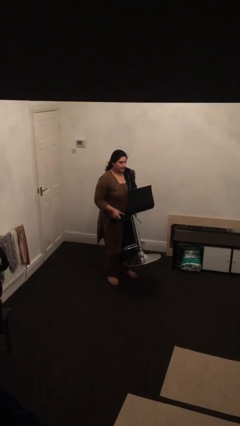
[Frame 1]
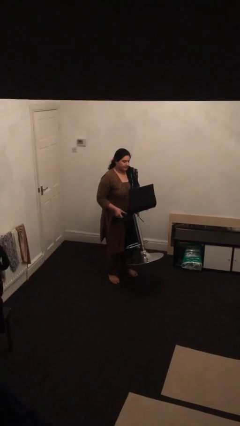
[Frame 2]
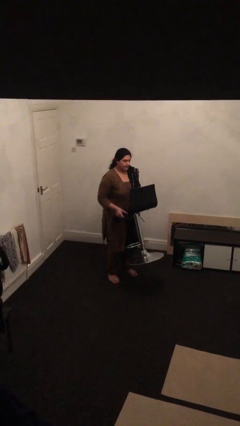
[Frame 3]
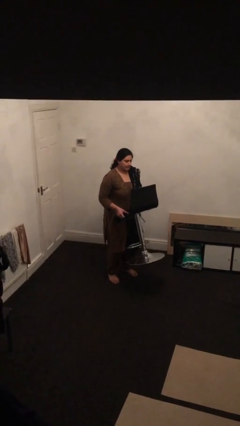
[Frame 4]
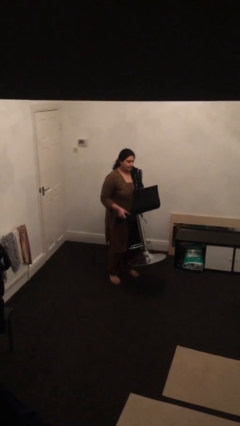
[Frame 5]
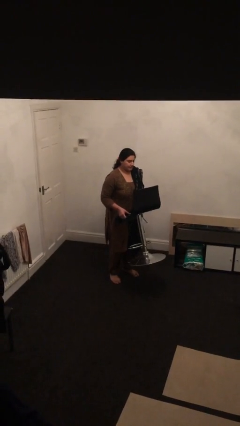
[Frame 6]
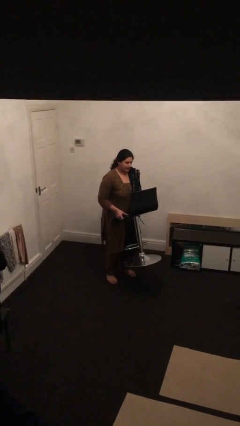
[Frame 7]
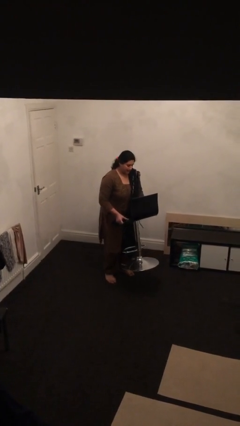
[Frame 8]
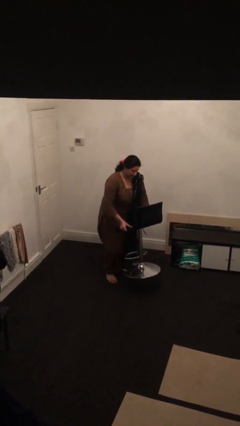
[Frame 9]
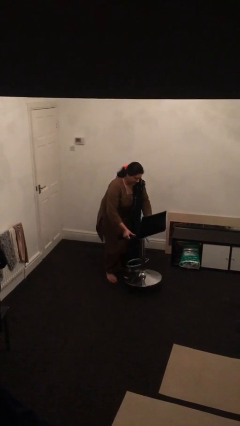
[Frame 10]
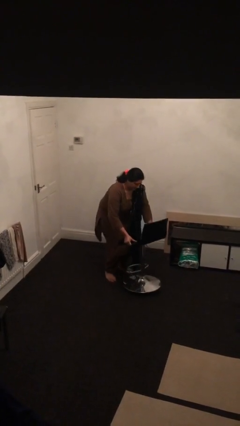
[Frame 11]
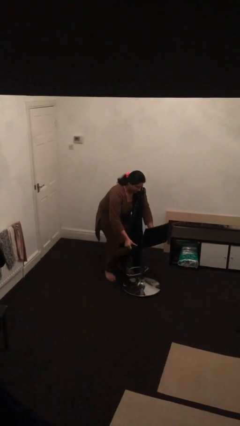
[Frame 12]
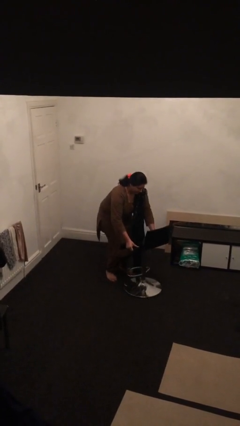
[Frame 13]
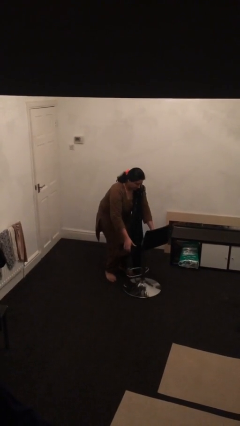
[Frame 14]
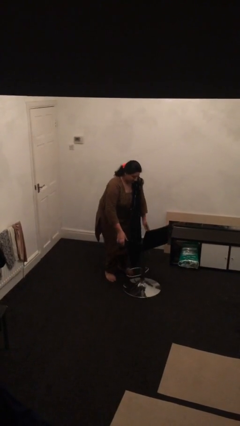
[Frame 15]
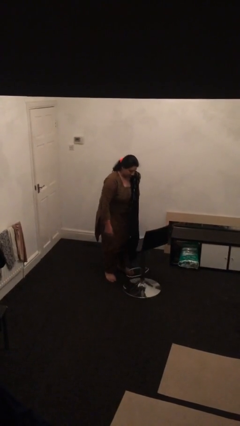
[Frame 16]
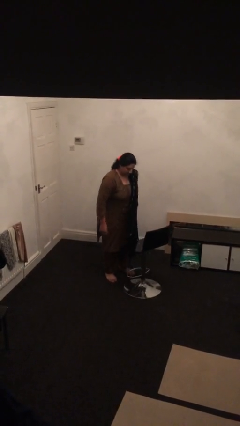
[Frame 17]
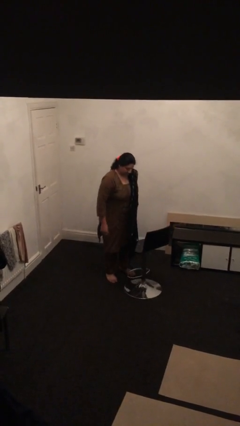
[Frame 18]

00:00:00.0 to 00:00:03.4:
person puts down object on floor

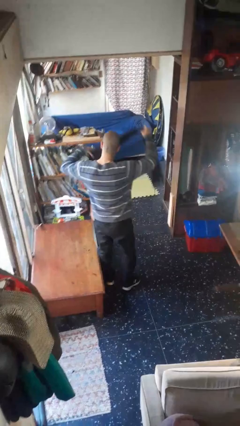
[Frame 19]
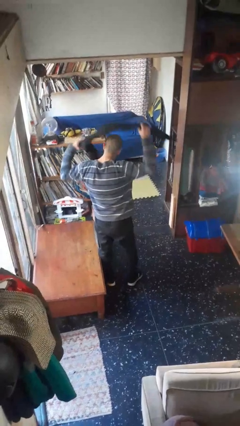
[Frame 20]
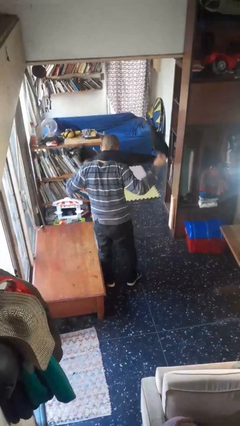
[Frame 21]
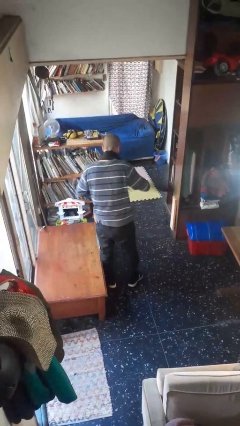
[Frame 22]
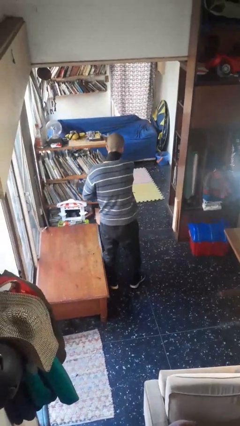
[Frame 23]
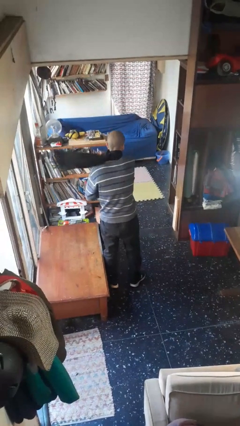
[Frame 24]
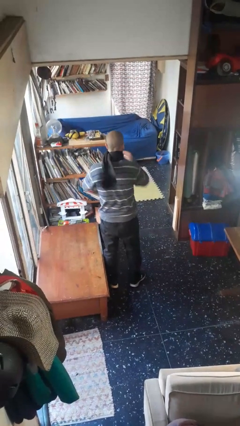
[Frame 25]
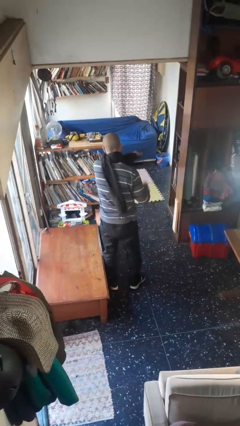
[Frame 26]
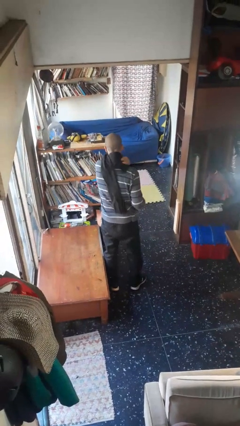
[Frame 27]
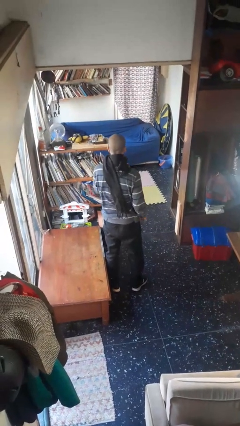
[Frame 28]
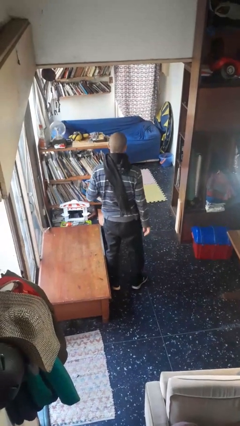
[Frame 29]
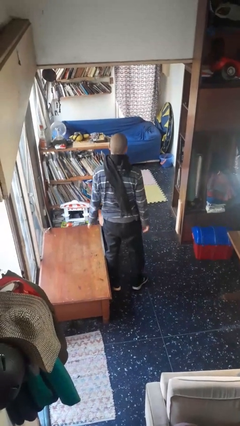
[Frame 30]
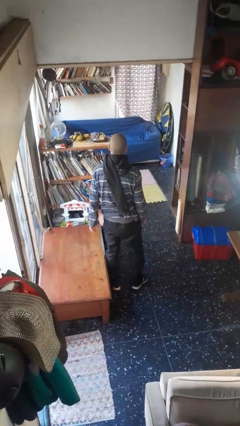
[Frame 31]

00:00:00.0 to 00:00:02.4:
person puts on scarf

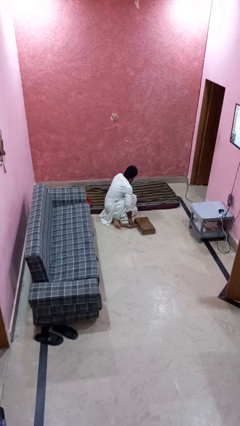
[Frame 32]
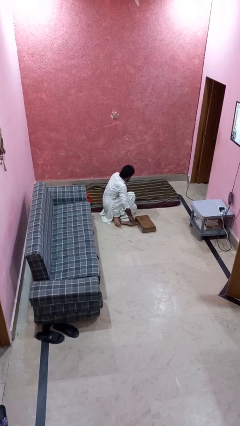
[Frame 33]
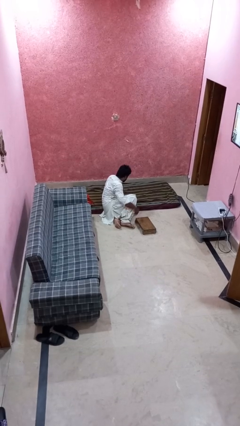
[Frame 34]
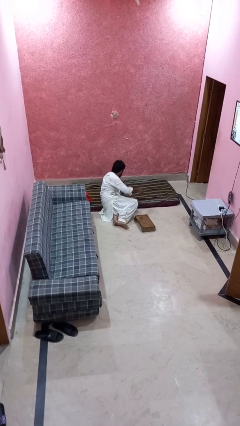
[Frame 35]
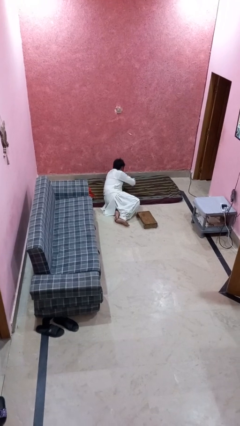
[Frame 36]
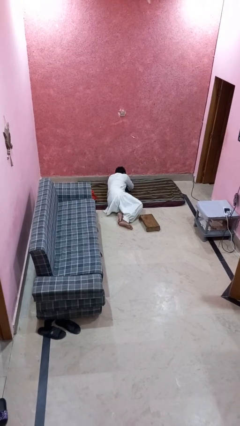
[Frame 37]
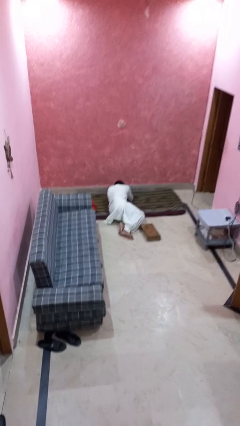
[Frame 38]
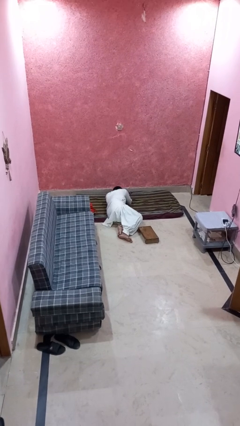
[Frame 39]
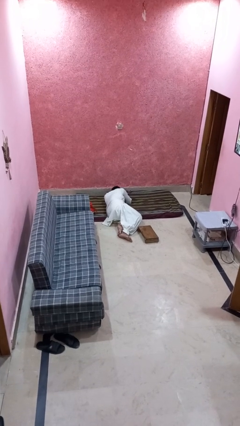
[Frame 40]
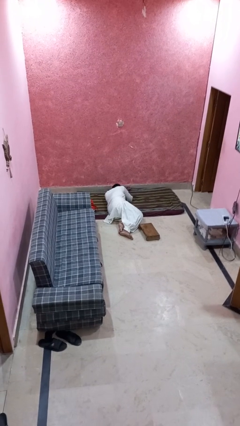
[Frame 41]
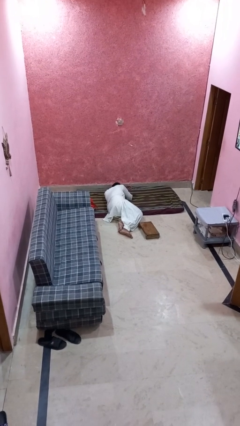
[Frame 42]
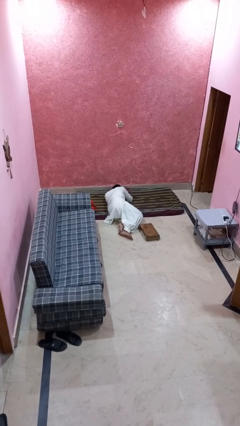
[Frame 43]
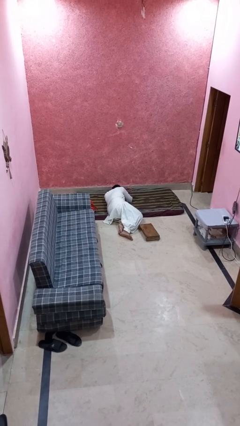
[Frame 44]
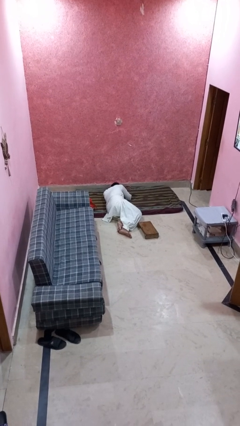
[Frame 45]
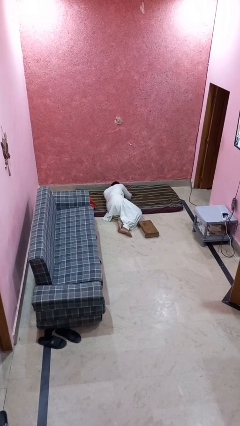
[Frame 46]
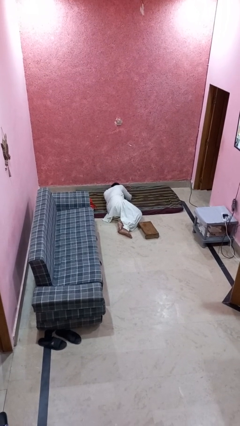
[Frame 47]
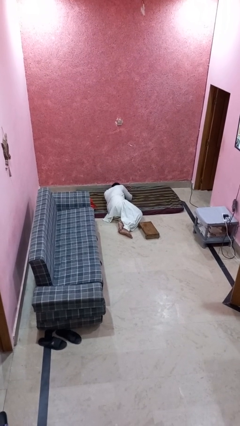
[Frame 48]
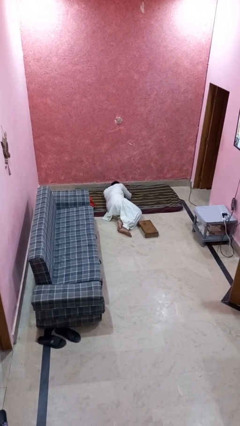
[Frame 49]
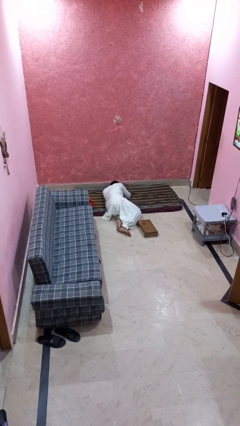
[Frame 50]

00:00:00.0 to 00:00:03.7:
person lies down on floor

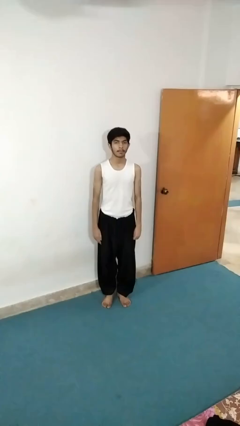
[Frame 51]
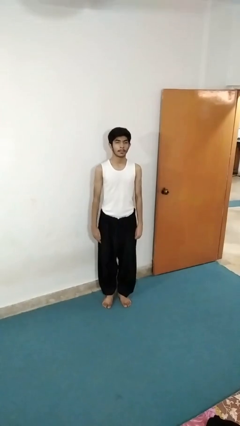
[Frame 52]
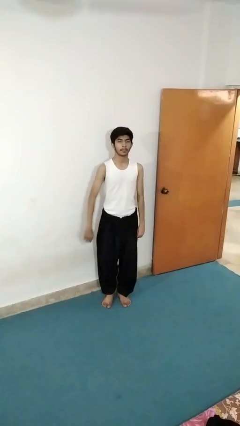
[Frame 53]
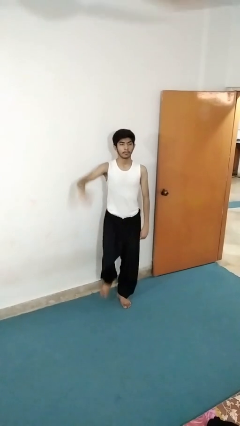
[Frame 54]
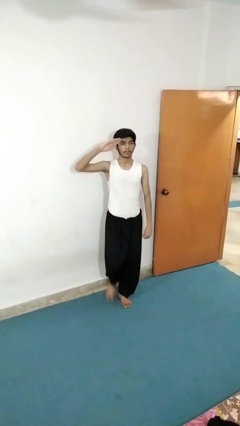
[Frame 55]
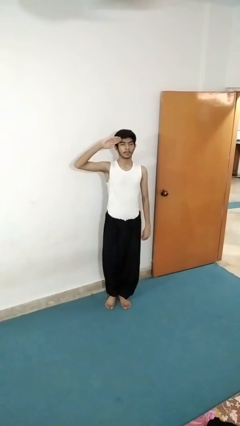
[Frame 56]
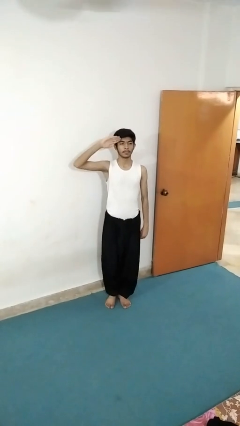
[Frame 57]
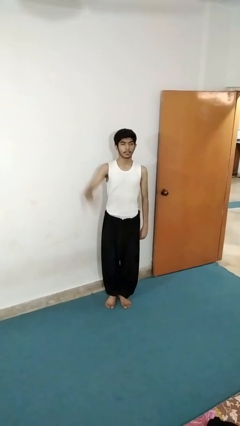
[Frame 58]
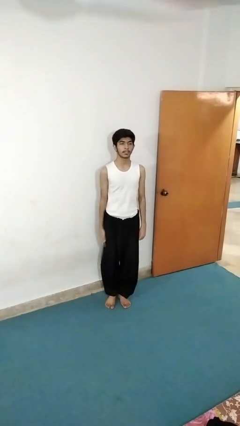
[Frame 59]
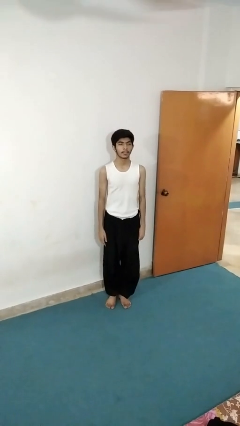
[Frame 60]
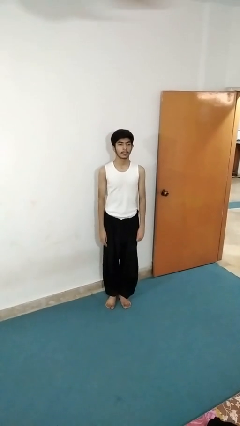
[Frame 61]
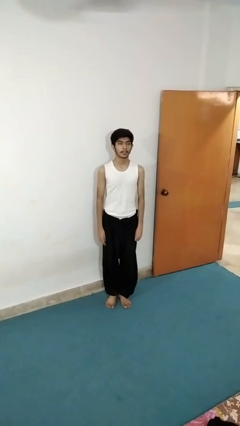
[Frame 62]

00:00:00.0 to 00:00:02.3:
person salutes

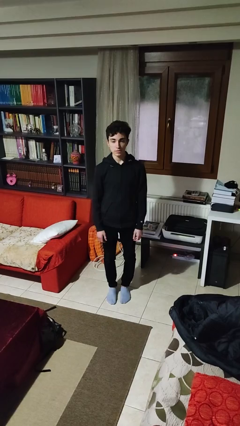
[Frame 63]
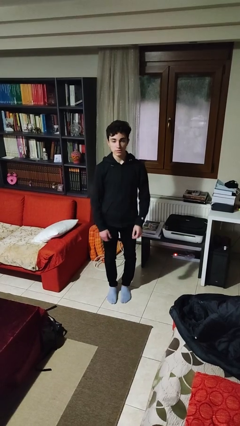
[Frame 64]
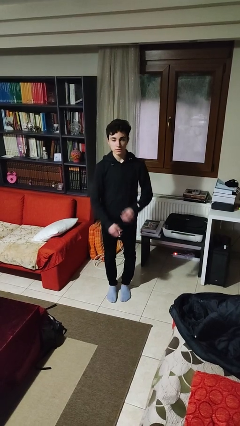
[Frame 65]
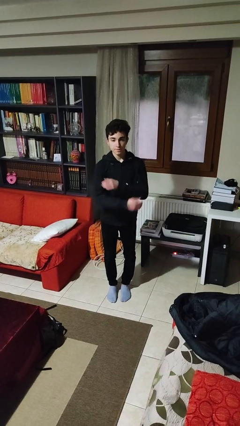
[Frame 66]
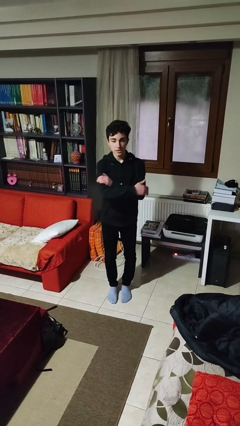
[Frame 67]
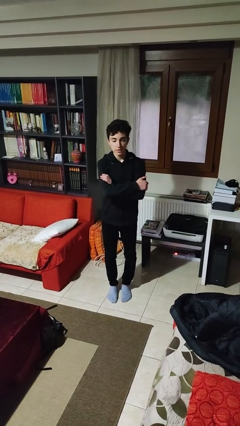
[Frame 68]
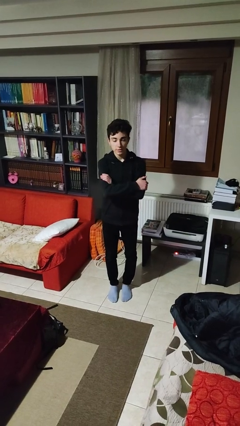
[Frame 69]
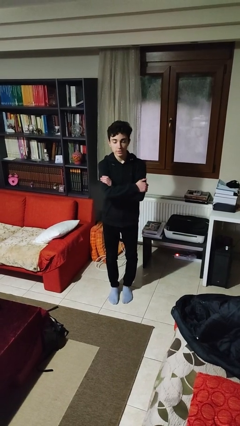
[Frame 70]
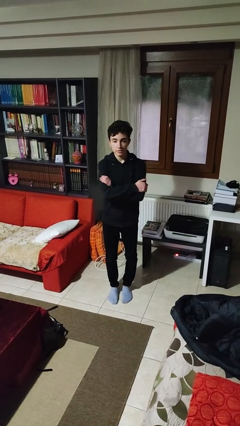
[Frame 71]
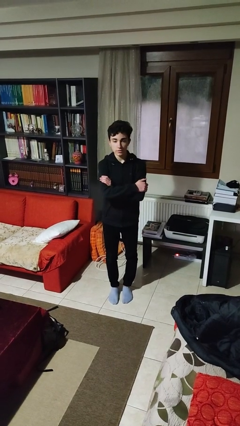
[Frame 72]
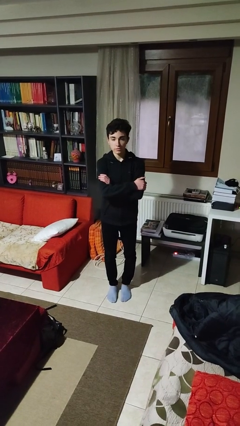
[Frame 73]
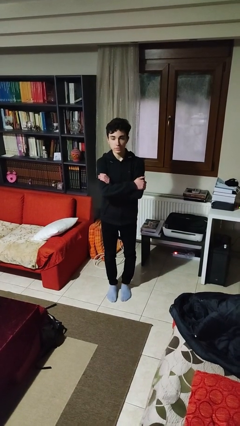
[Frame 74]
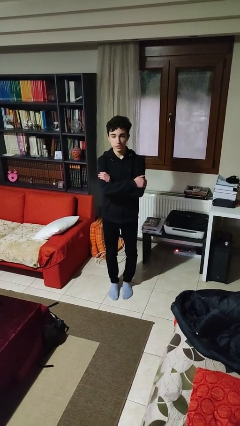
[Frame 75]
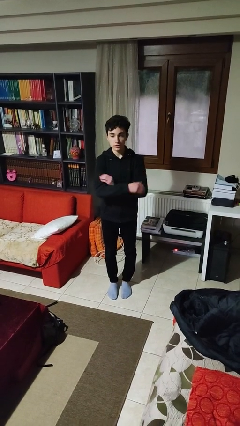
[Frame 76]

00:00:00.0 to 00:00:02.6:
person crosses arms

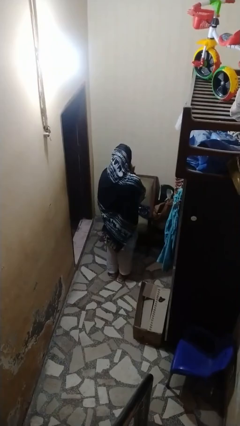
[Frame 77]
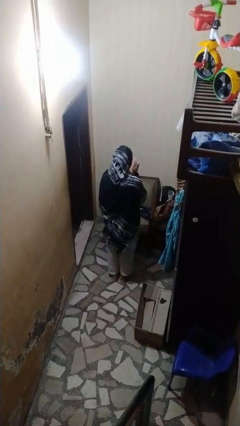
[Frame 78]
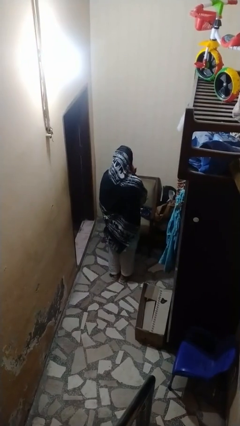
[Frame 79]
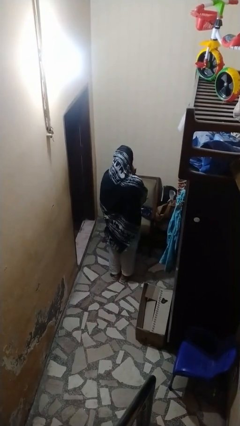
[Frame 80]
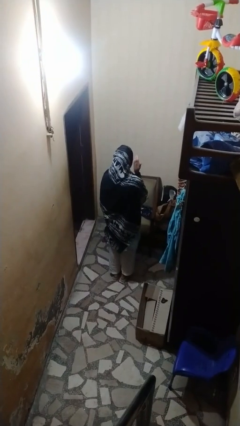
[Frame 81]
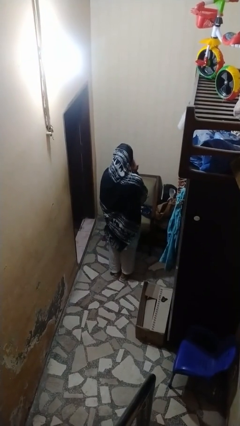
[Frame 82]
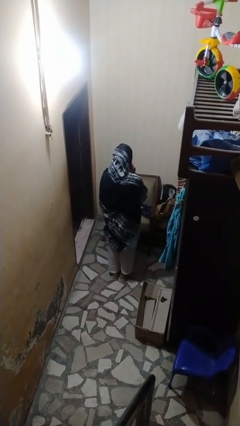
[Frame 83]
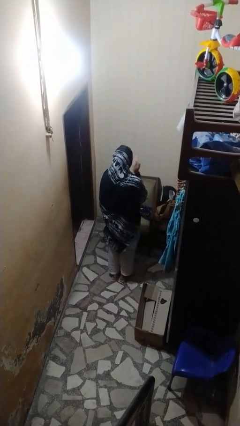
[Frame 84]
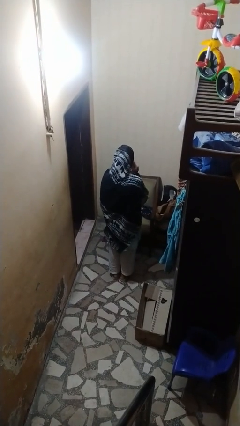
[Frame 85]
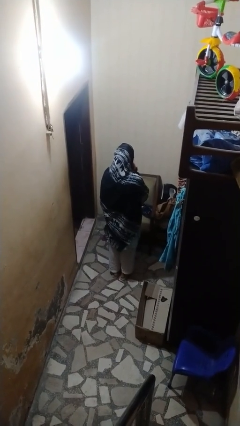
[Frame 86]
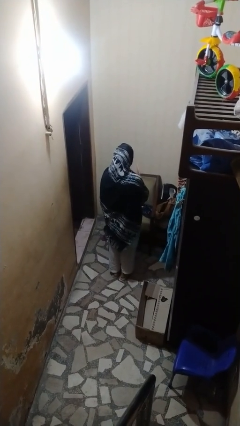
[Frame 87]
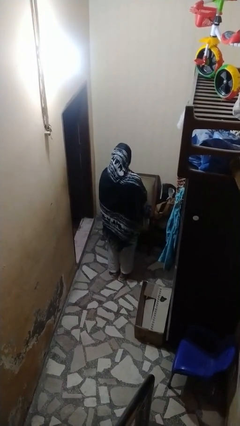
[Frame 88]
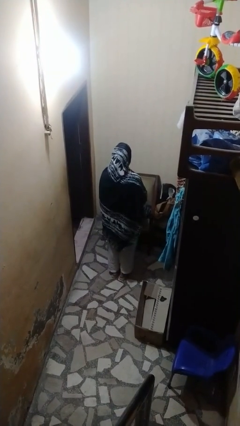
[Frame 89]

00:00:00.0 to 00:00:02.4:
person gestures blow kiss

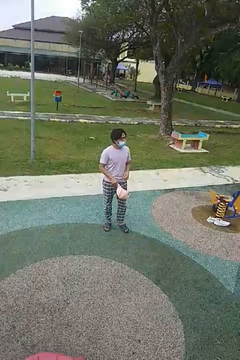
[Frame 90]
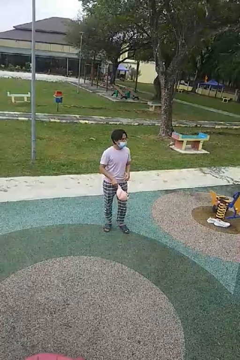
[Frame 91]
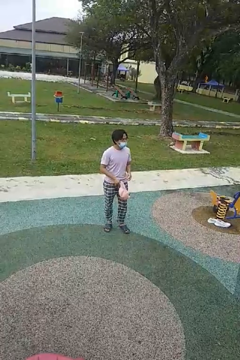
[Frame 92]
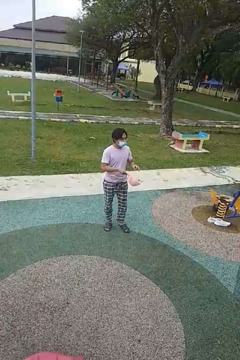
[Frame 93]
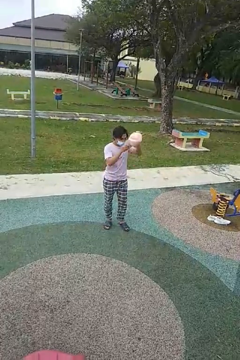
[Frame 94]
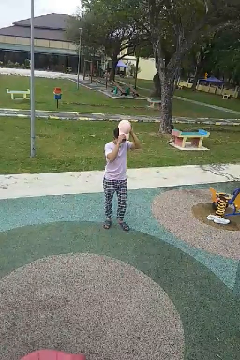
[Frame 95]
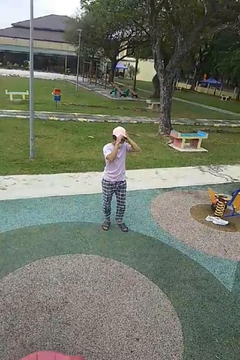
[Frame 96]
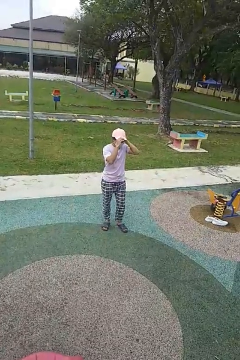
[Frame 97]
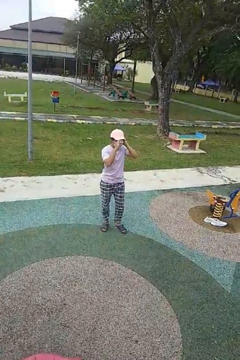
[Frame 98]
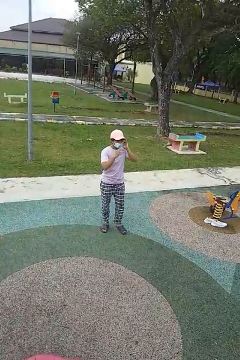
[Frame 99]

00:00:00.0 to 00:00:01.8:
person puts on hat
